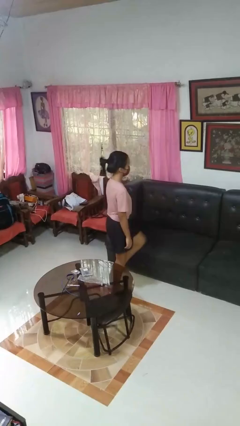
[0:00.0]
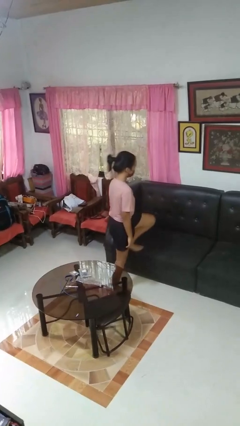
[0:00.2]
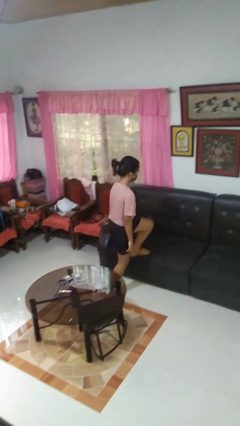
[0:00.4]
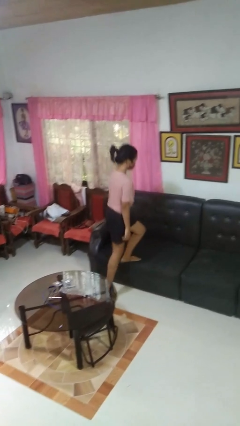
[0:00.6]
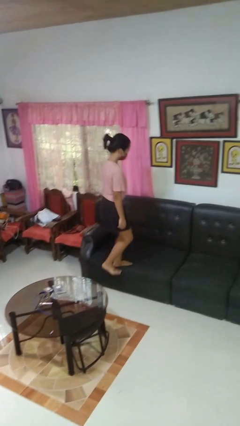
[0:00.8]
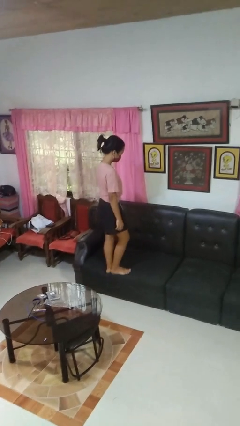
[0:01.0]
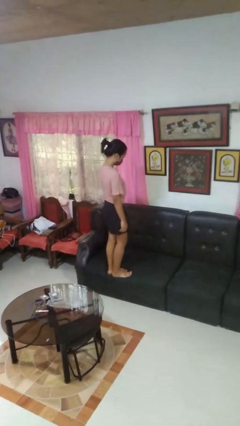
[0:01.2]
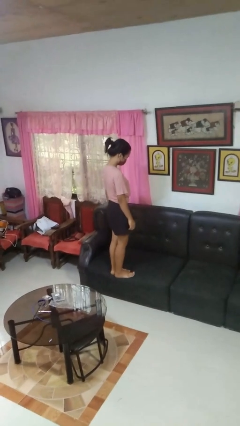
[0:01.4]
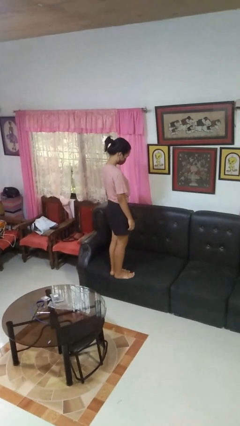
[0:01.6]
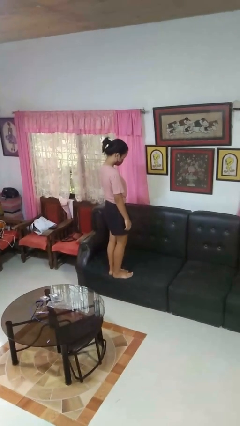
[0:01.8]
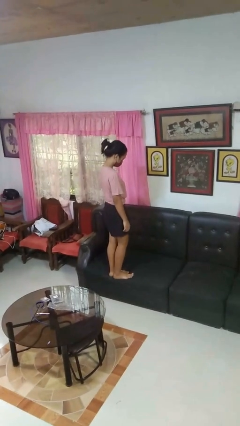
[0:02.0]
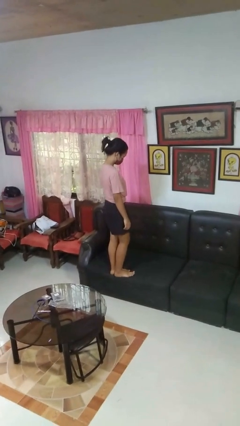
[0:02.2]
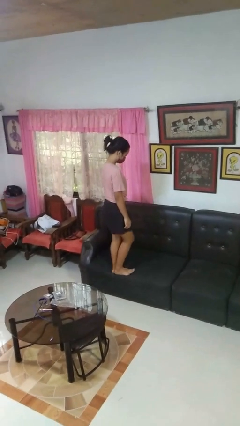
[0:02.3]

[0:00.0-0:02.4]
person climbs on couch

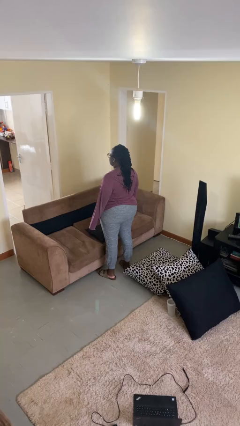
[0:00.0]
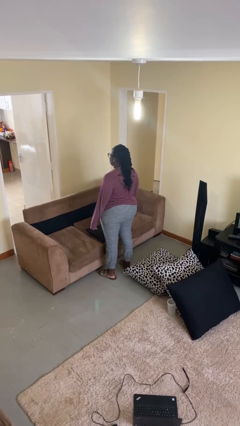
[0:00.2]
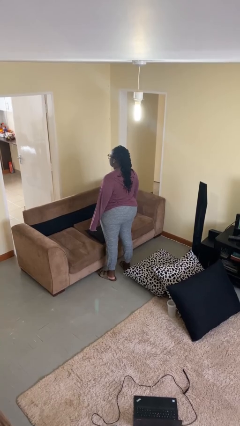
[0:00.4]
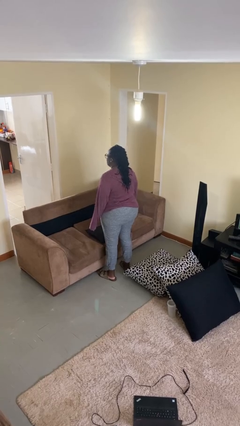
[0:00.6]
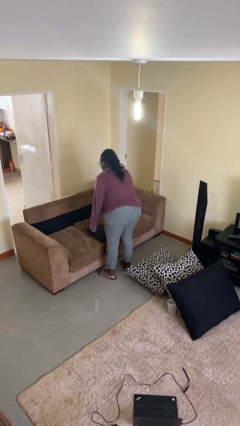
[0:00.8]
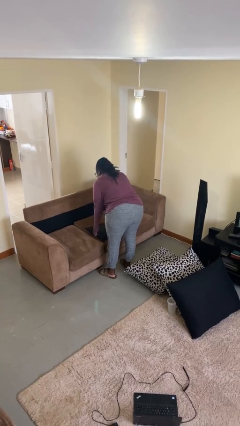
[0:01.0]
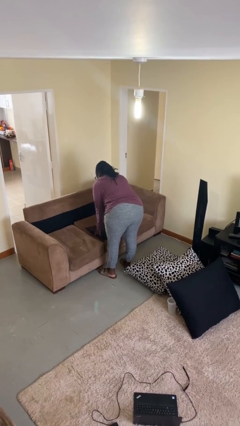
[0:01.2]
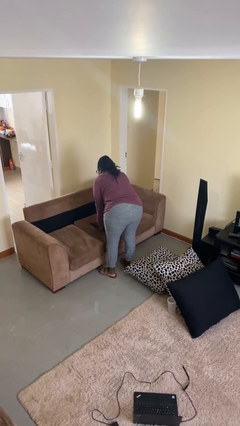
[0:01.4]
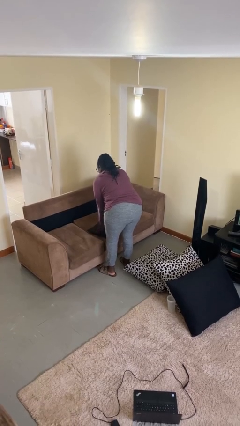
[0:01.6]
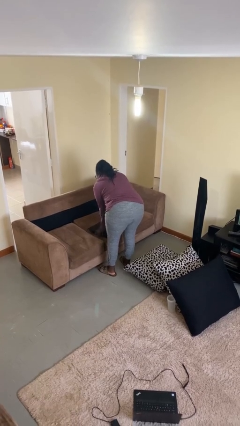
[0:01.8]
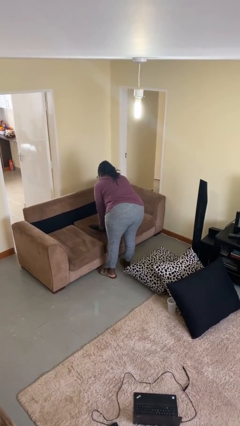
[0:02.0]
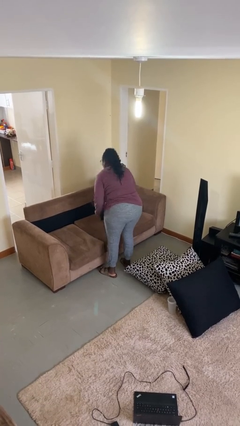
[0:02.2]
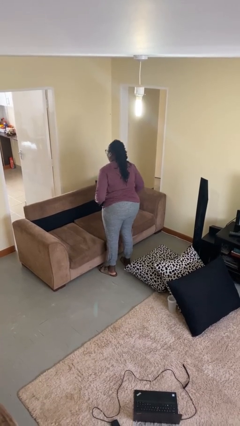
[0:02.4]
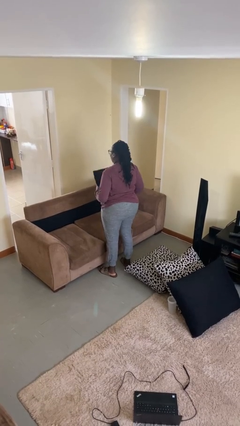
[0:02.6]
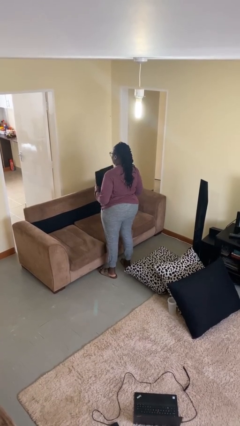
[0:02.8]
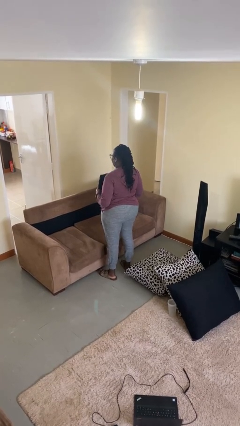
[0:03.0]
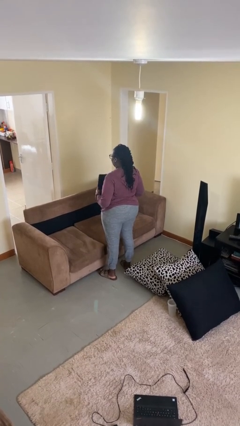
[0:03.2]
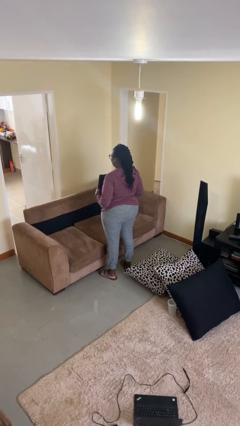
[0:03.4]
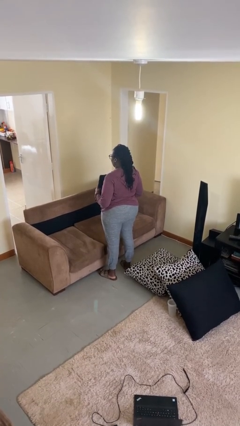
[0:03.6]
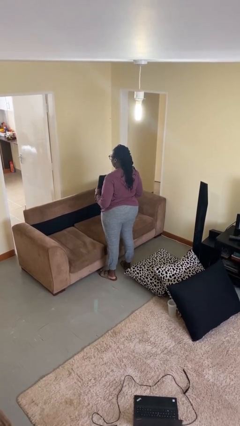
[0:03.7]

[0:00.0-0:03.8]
person picks up object from couch

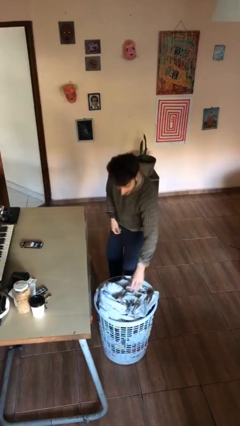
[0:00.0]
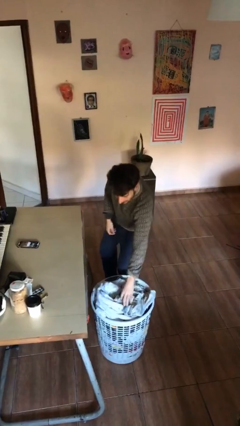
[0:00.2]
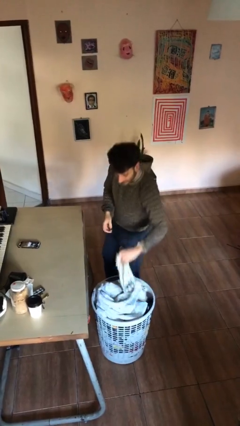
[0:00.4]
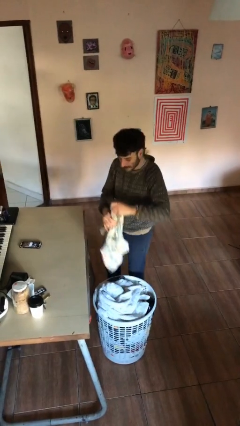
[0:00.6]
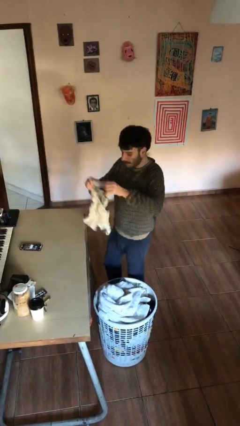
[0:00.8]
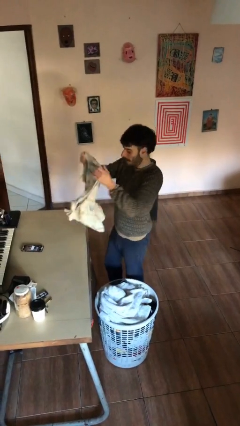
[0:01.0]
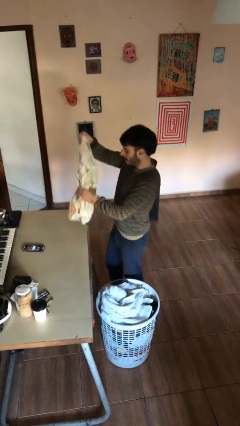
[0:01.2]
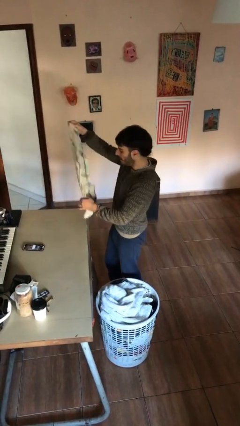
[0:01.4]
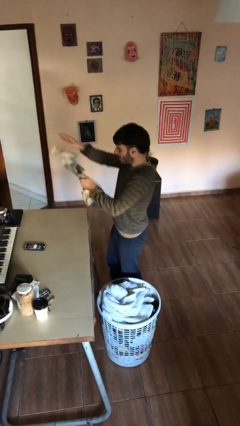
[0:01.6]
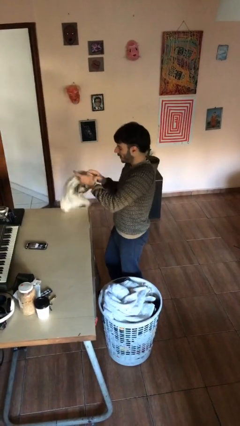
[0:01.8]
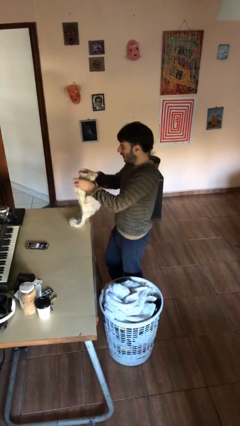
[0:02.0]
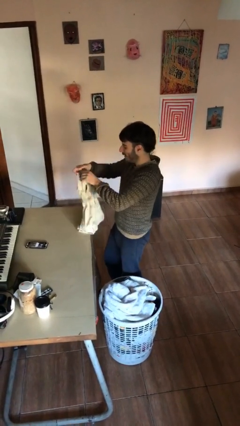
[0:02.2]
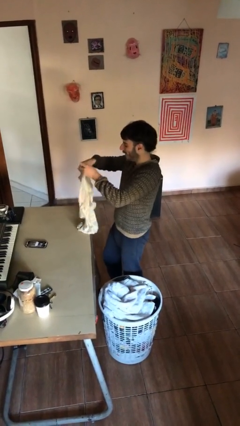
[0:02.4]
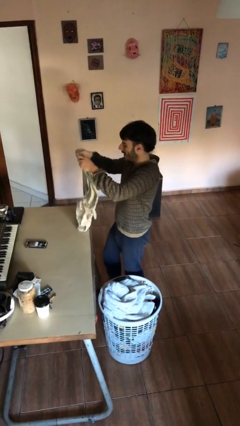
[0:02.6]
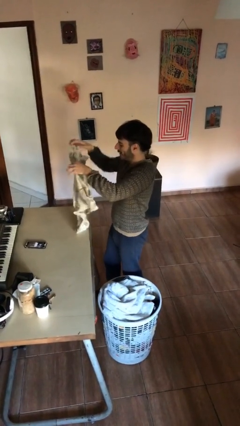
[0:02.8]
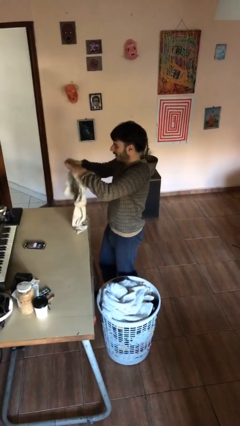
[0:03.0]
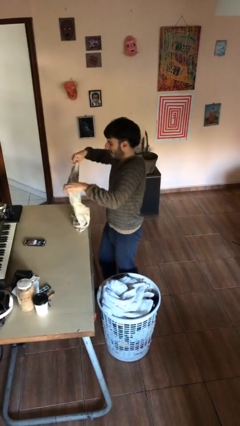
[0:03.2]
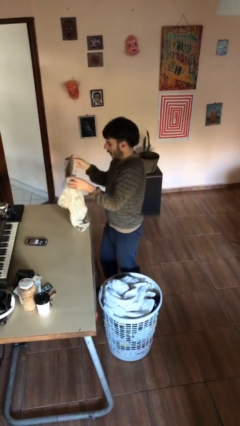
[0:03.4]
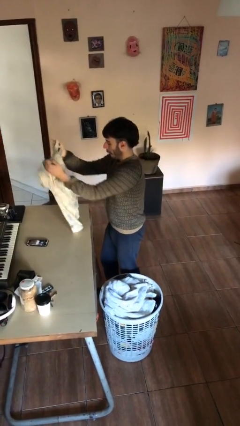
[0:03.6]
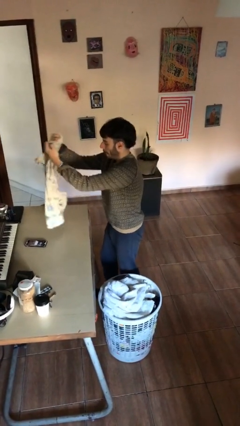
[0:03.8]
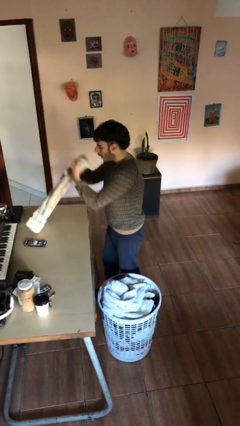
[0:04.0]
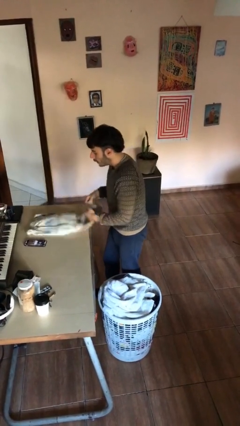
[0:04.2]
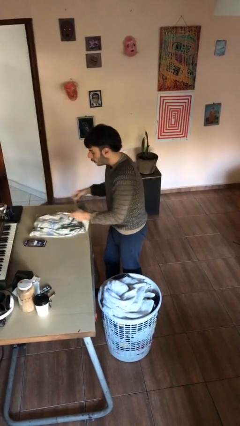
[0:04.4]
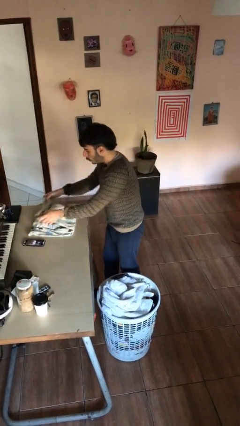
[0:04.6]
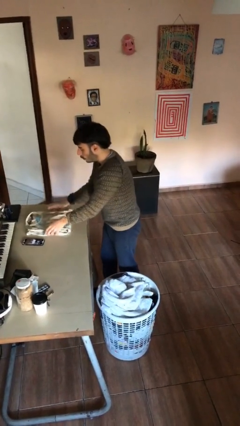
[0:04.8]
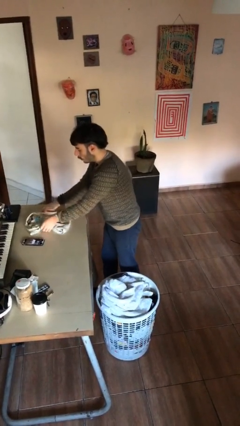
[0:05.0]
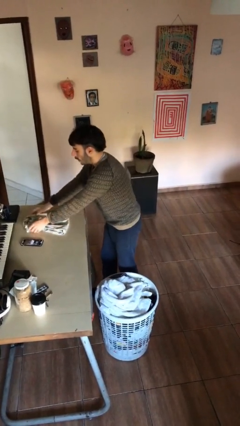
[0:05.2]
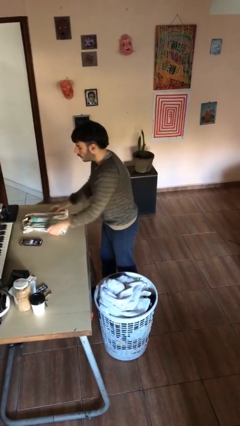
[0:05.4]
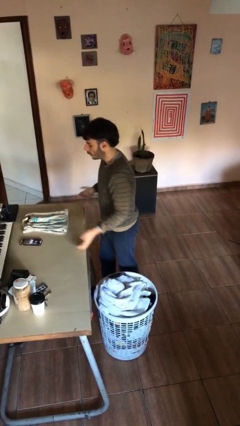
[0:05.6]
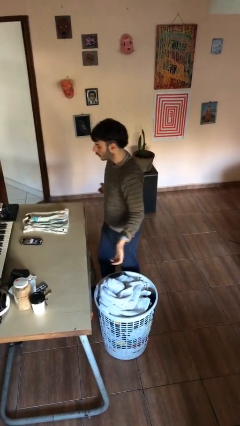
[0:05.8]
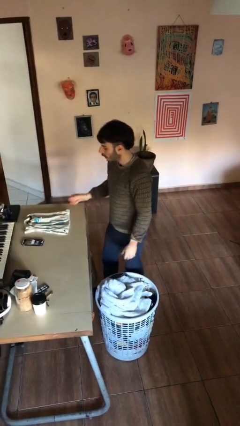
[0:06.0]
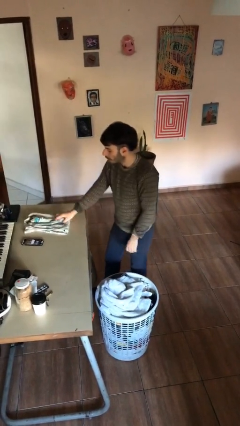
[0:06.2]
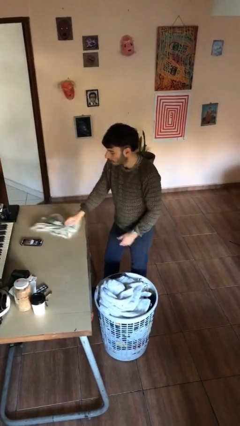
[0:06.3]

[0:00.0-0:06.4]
person folds shirt

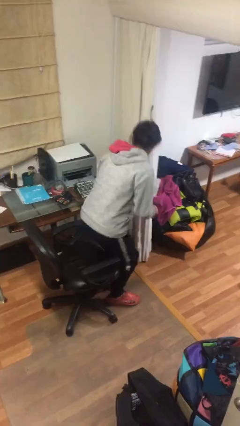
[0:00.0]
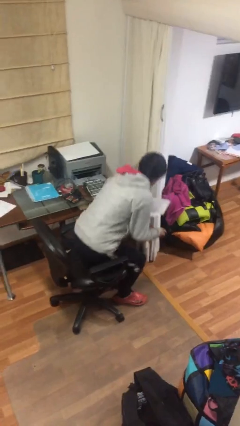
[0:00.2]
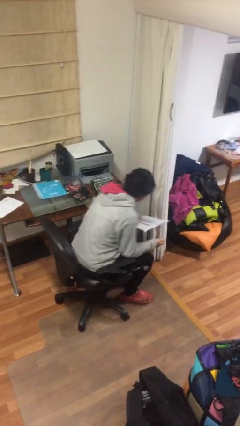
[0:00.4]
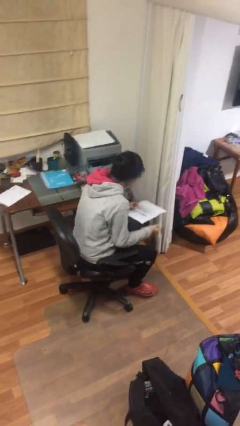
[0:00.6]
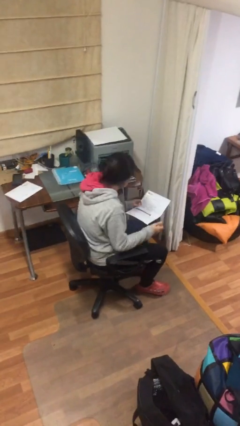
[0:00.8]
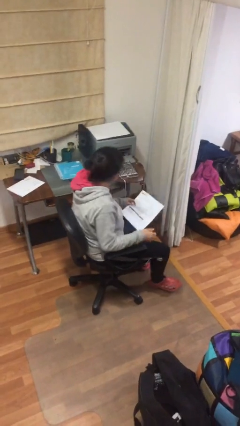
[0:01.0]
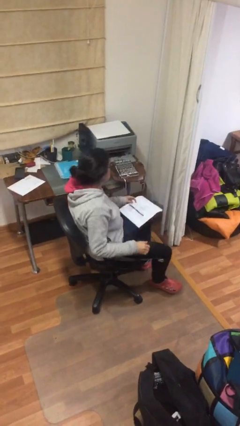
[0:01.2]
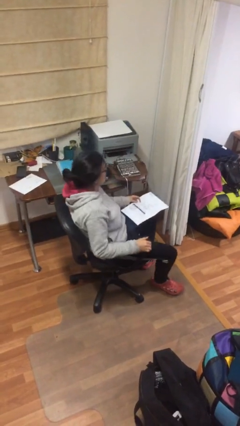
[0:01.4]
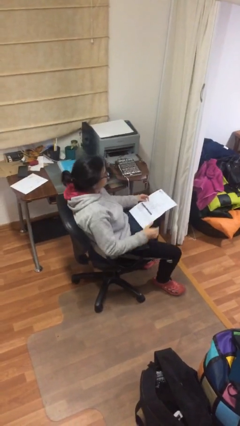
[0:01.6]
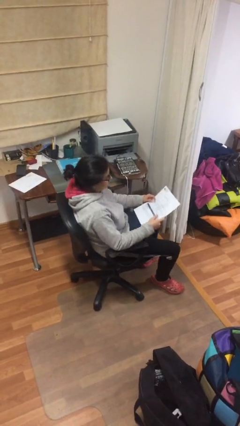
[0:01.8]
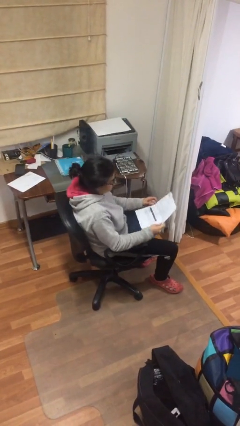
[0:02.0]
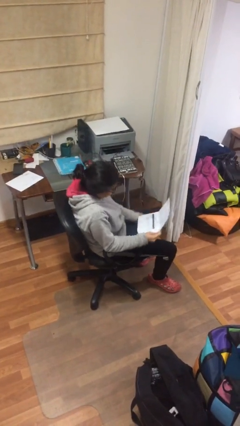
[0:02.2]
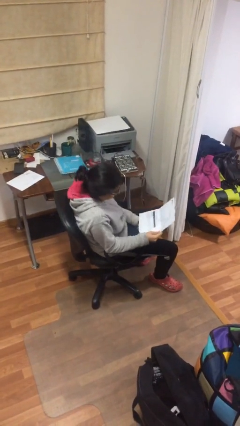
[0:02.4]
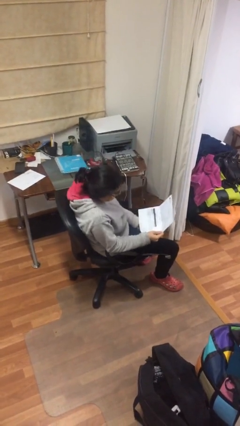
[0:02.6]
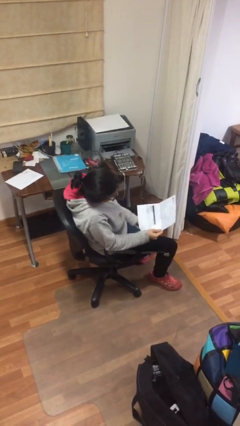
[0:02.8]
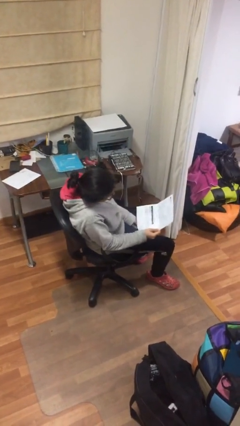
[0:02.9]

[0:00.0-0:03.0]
person sits down

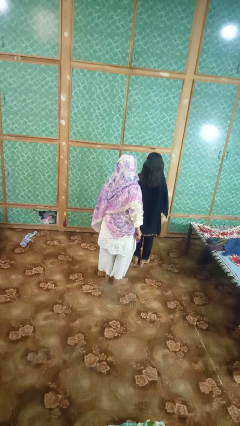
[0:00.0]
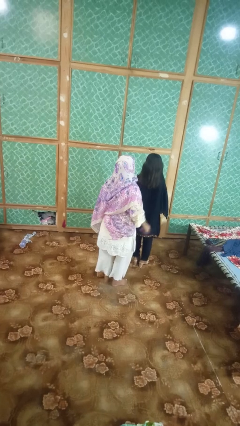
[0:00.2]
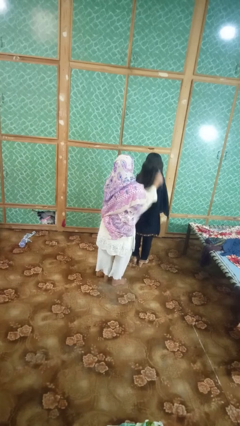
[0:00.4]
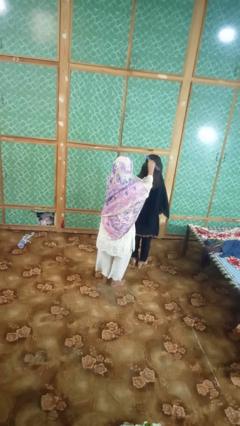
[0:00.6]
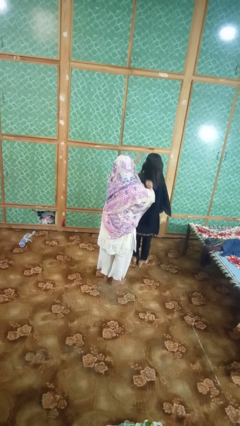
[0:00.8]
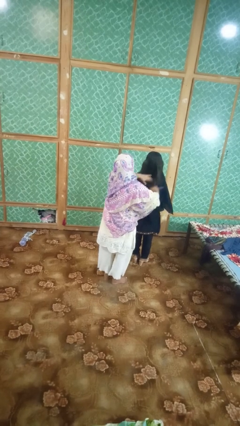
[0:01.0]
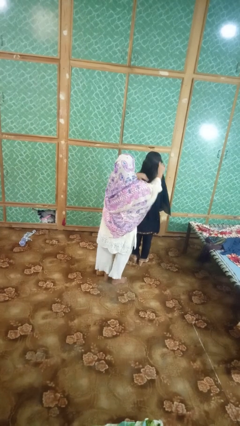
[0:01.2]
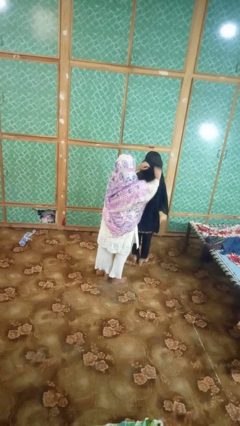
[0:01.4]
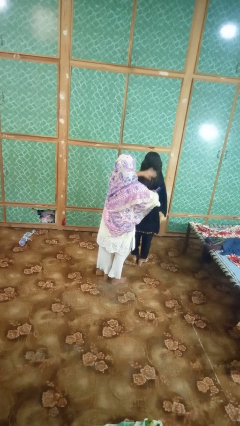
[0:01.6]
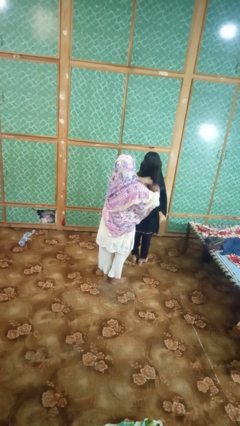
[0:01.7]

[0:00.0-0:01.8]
person brushes hair of person

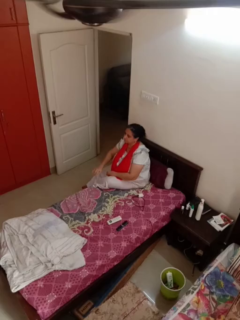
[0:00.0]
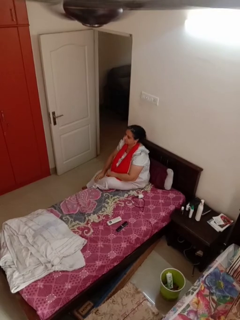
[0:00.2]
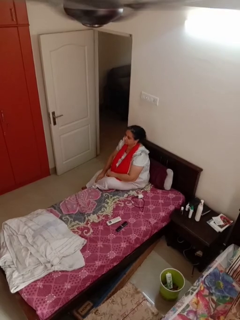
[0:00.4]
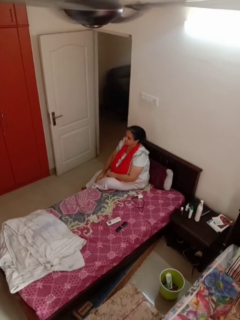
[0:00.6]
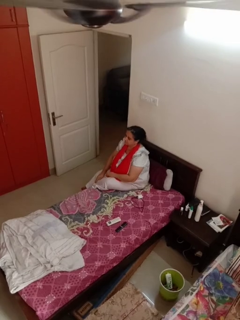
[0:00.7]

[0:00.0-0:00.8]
person gestures lower hand
